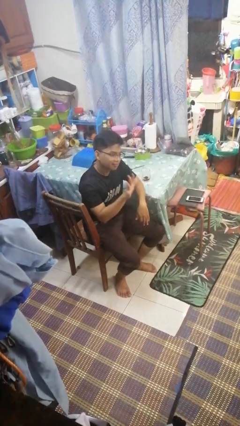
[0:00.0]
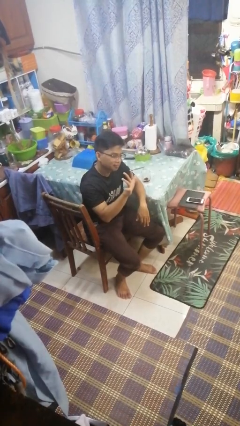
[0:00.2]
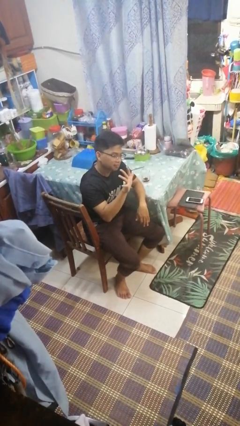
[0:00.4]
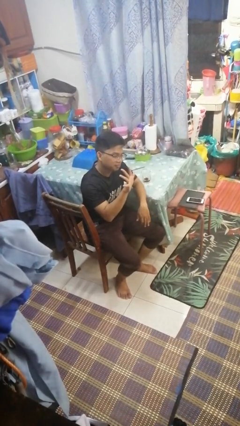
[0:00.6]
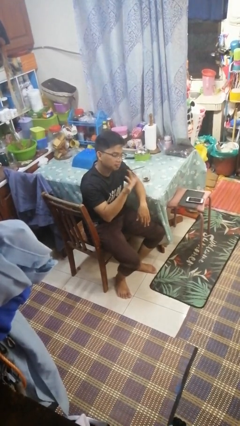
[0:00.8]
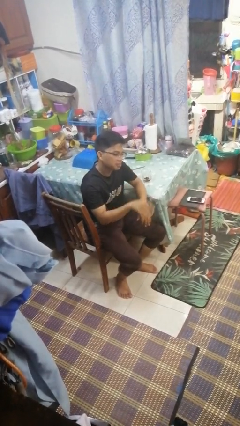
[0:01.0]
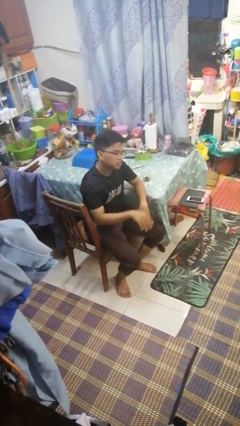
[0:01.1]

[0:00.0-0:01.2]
person gestures number five

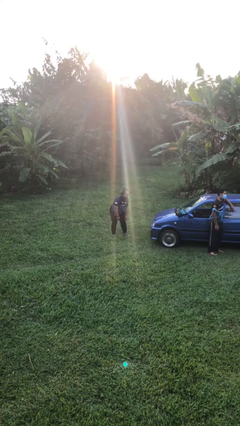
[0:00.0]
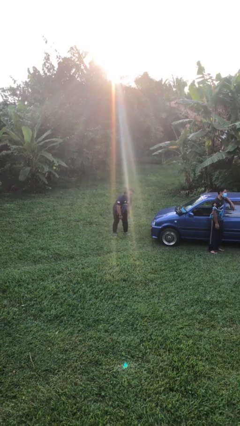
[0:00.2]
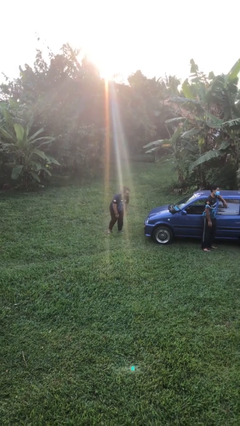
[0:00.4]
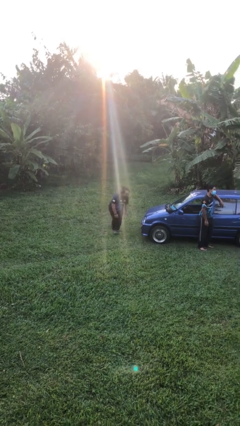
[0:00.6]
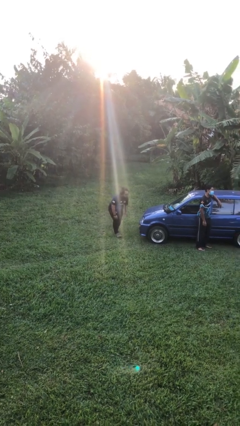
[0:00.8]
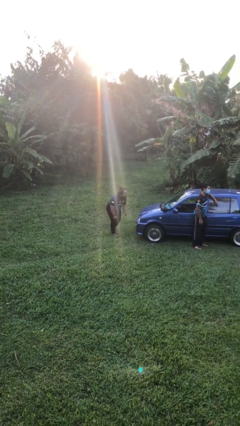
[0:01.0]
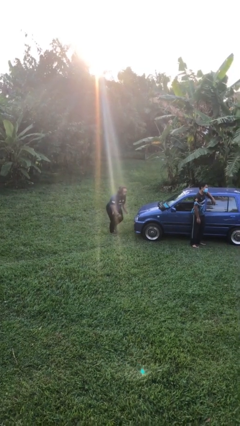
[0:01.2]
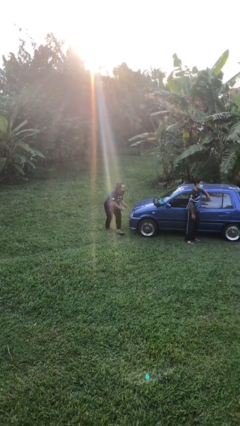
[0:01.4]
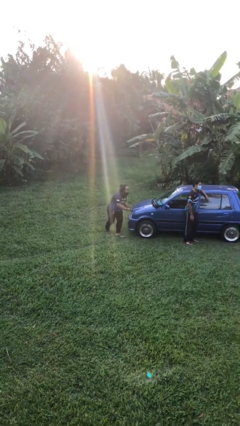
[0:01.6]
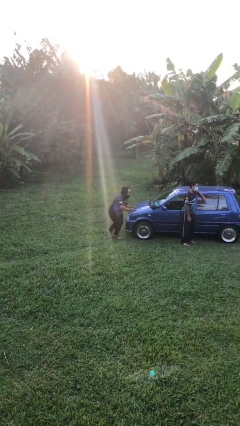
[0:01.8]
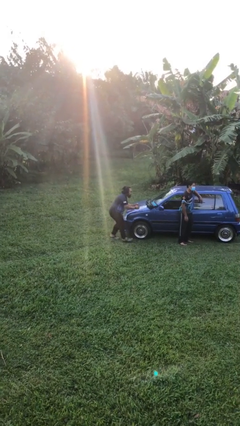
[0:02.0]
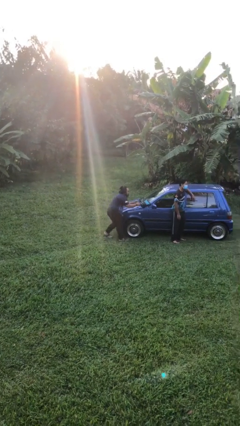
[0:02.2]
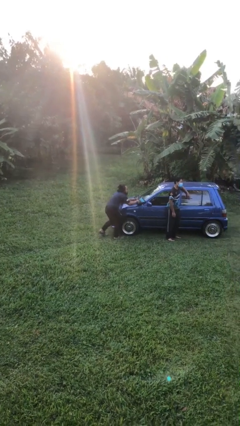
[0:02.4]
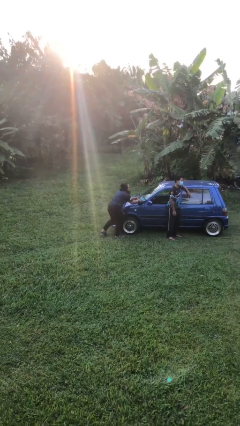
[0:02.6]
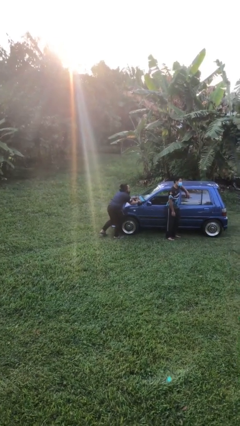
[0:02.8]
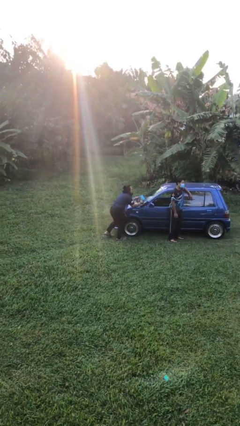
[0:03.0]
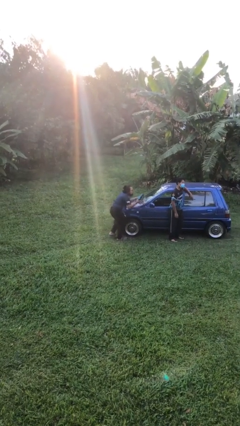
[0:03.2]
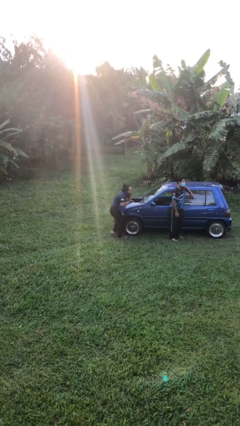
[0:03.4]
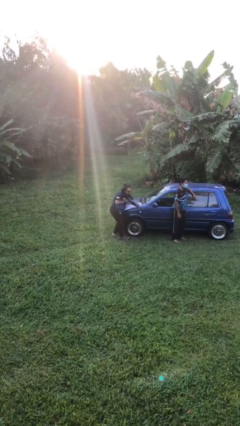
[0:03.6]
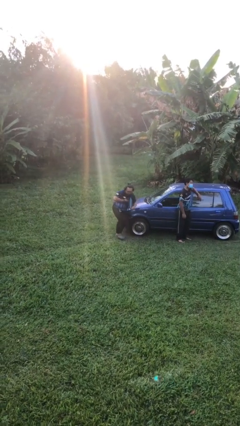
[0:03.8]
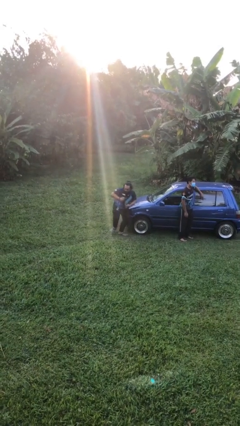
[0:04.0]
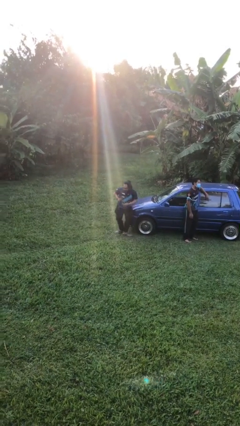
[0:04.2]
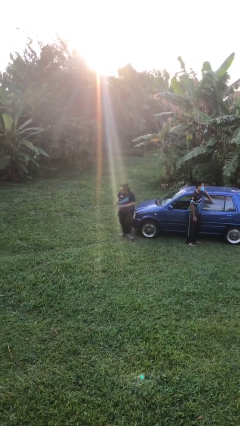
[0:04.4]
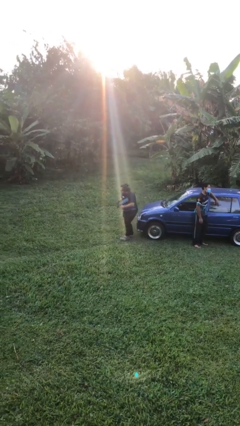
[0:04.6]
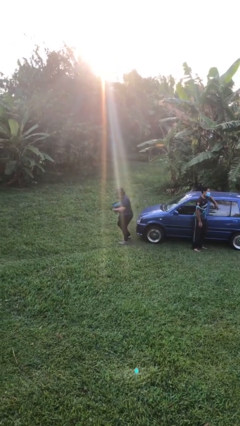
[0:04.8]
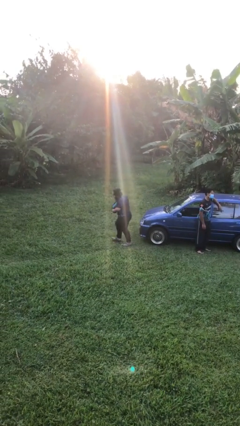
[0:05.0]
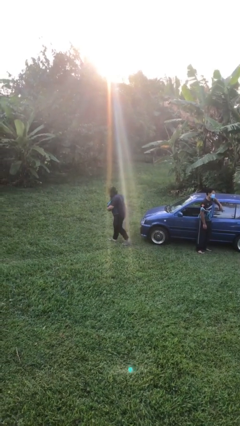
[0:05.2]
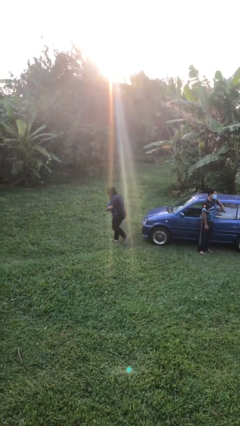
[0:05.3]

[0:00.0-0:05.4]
person steals object from person

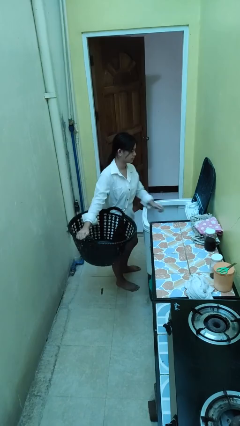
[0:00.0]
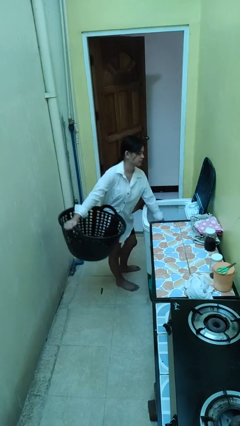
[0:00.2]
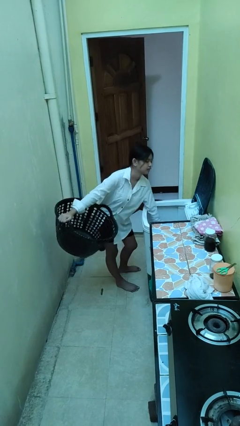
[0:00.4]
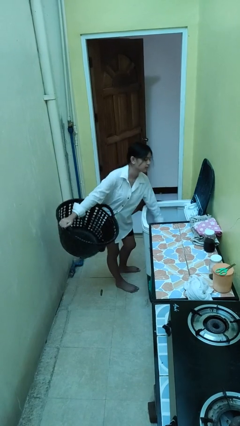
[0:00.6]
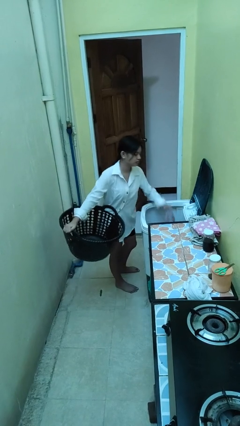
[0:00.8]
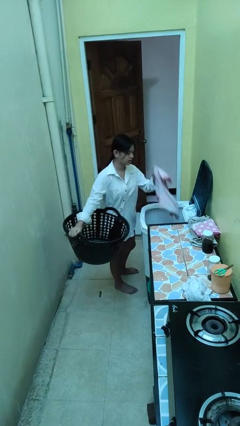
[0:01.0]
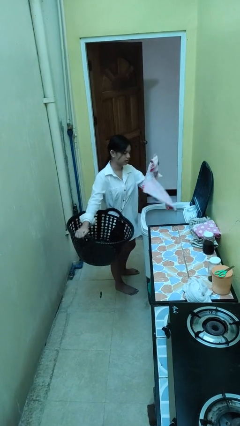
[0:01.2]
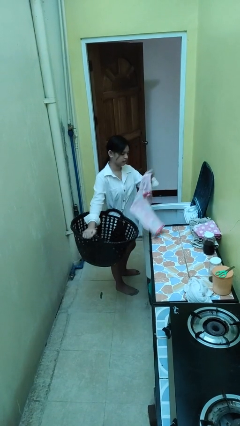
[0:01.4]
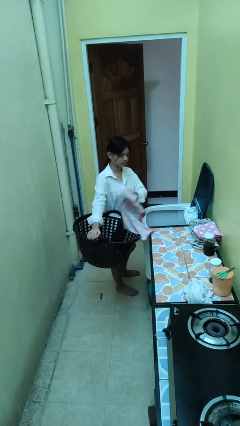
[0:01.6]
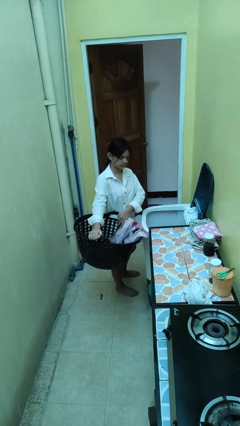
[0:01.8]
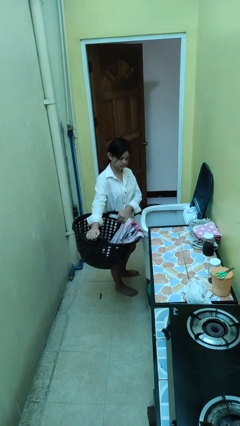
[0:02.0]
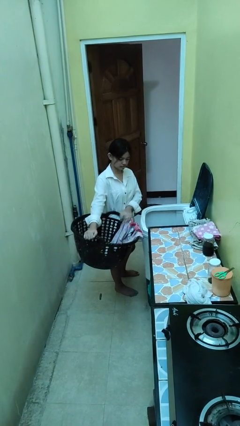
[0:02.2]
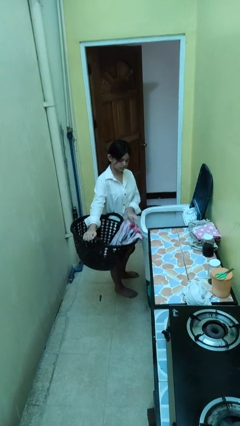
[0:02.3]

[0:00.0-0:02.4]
person loads clotheswasher

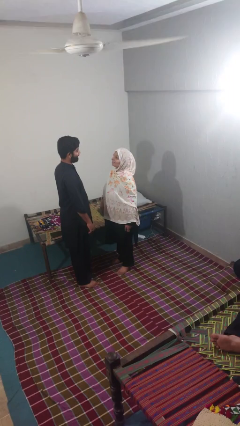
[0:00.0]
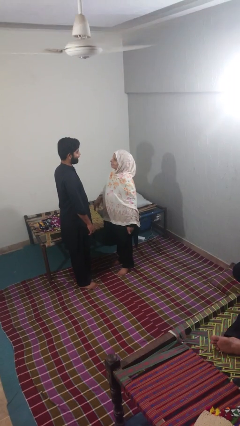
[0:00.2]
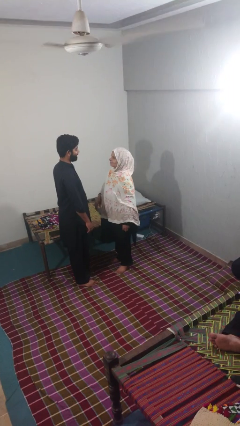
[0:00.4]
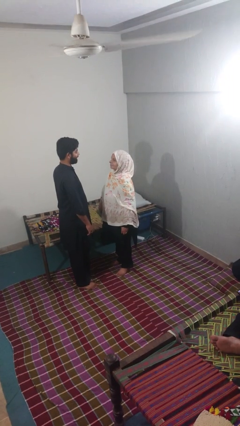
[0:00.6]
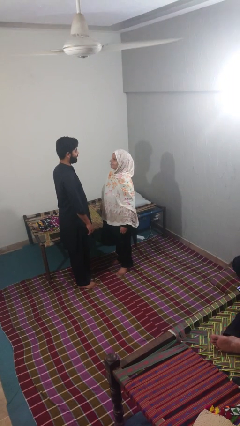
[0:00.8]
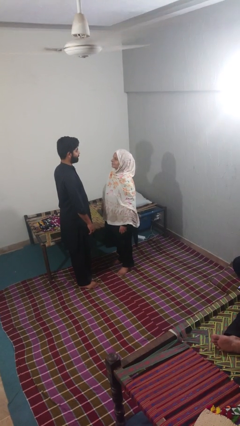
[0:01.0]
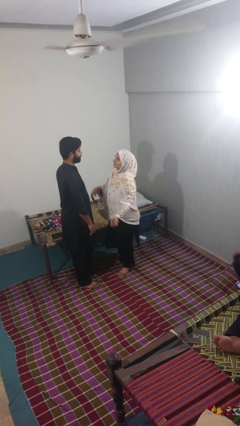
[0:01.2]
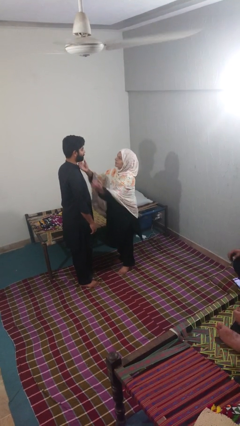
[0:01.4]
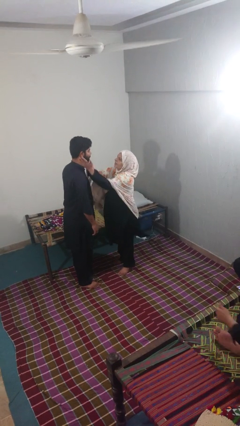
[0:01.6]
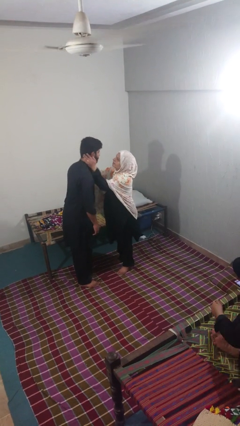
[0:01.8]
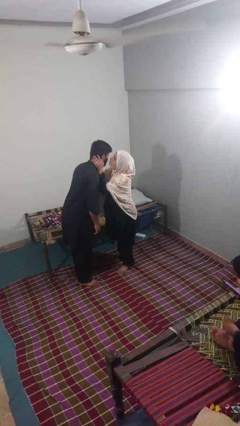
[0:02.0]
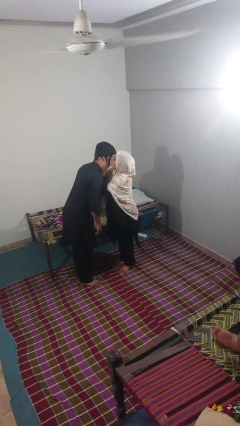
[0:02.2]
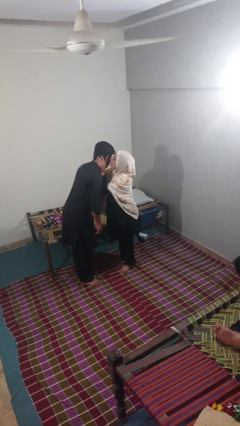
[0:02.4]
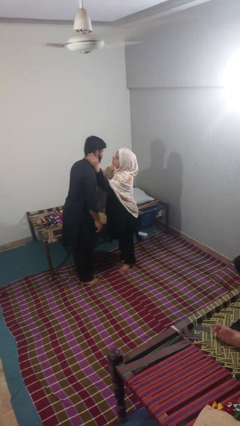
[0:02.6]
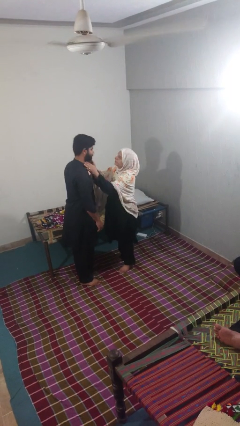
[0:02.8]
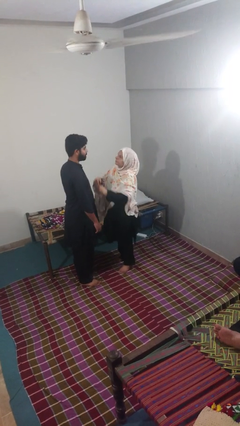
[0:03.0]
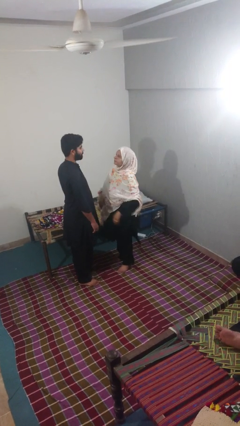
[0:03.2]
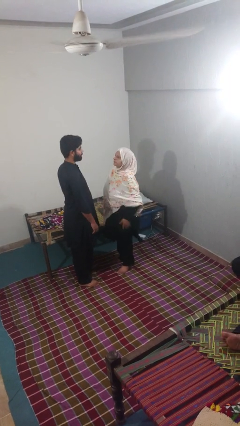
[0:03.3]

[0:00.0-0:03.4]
person kisses cheek of person

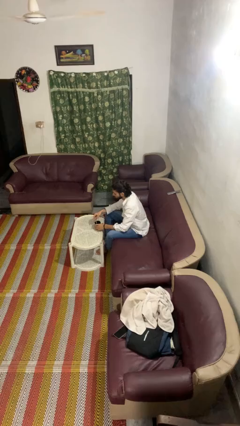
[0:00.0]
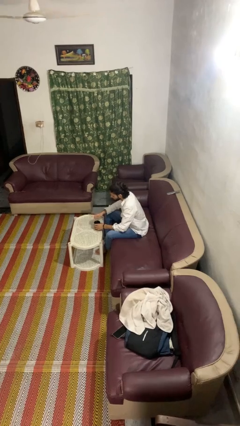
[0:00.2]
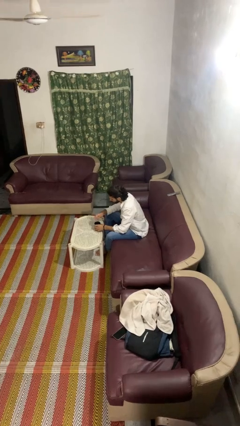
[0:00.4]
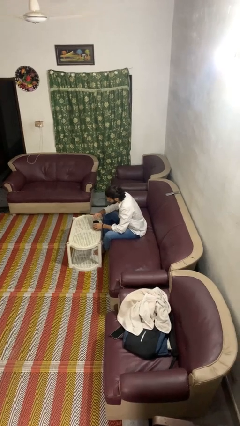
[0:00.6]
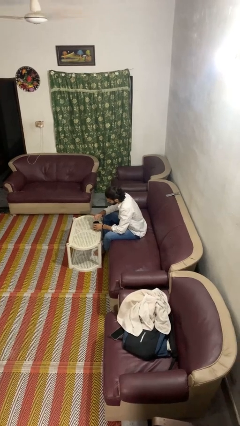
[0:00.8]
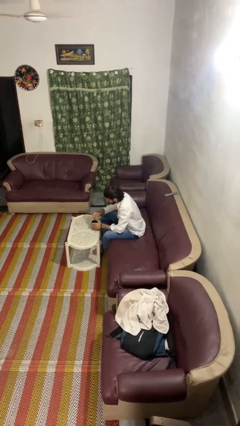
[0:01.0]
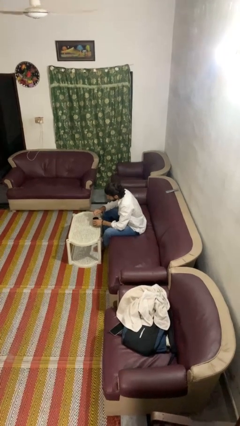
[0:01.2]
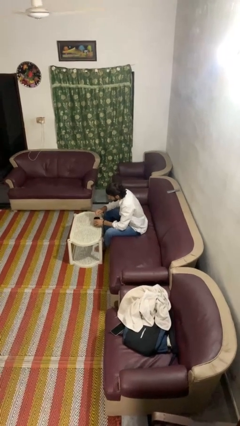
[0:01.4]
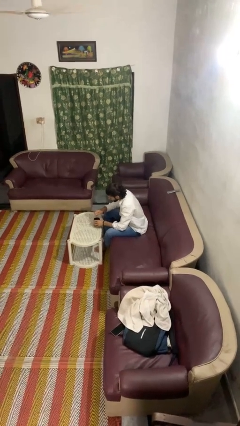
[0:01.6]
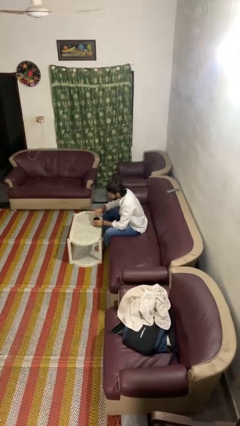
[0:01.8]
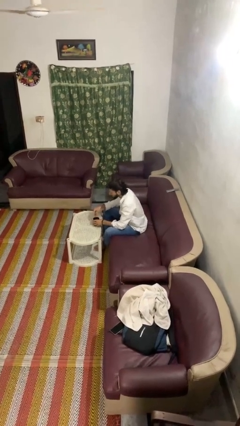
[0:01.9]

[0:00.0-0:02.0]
person stirs mug

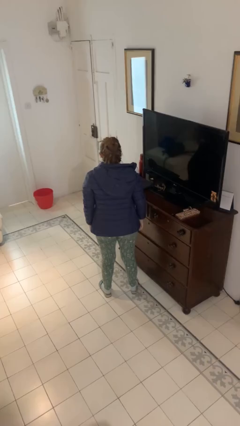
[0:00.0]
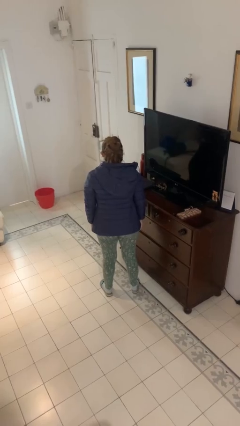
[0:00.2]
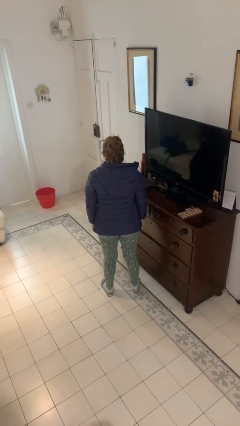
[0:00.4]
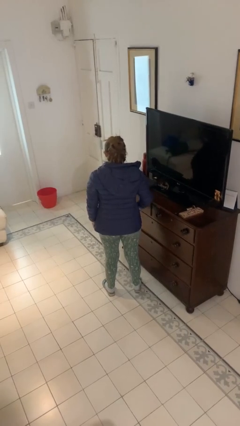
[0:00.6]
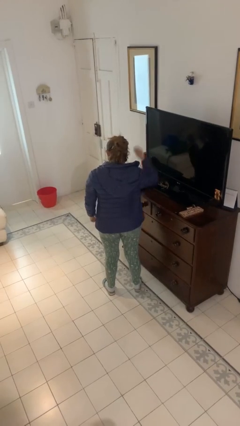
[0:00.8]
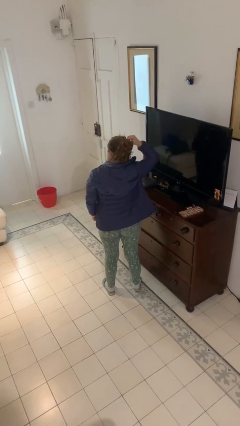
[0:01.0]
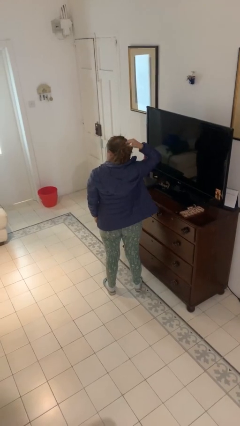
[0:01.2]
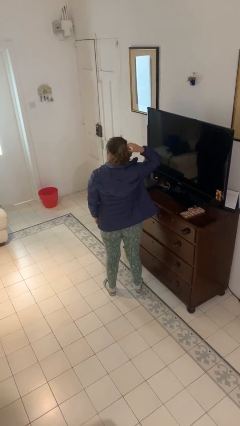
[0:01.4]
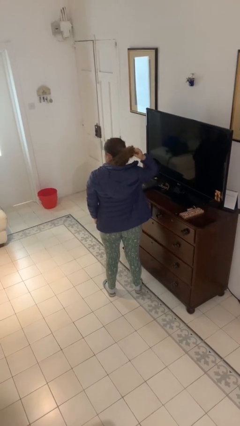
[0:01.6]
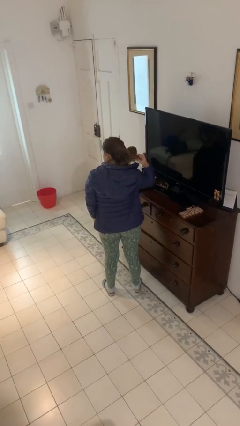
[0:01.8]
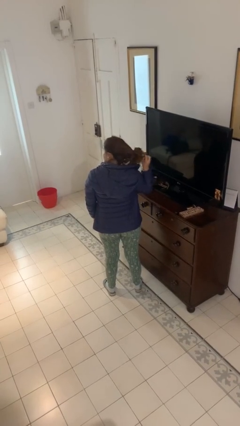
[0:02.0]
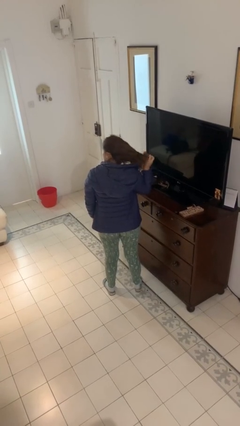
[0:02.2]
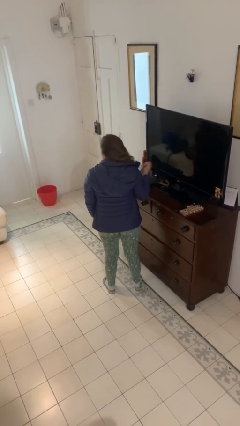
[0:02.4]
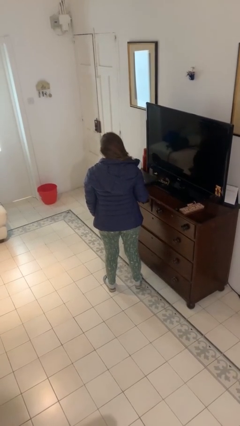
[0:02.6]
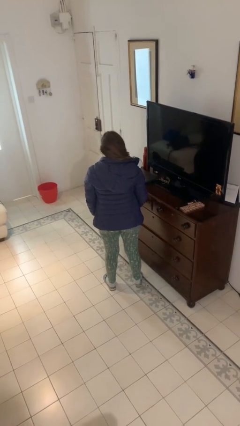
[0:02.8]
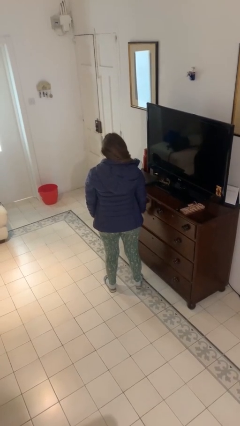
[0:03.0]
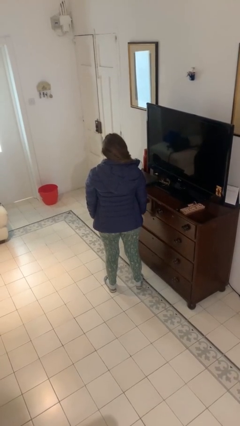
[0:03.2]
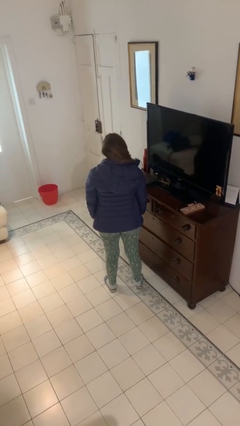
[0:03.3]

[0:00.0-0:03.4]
person takes off hairtie
